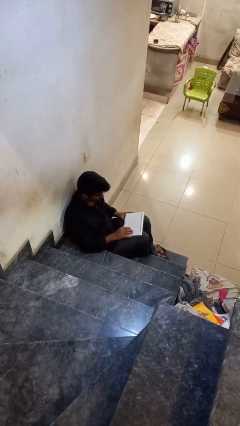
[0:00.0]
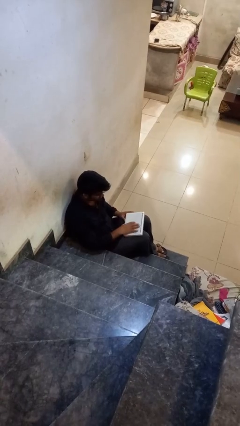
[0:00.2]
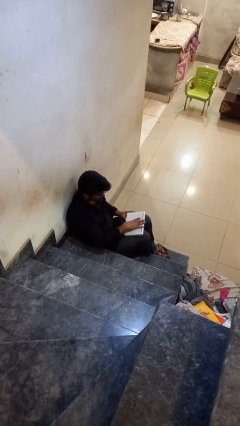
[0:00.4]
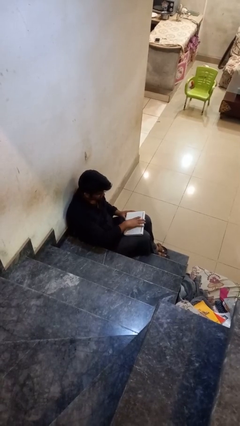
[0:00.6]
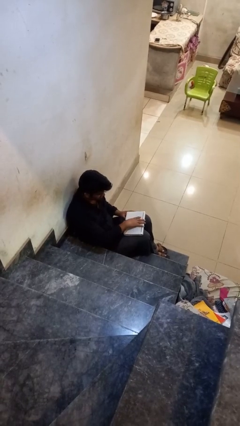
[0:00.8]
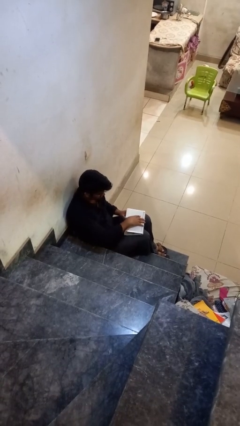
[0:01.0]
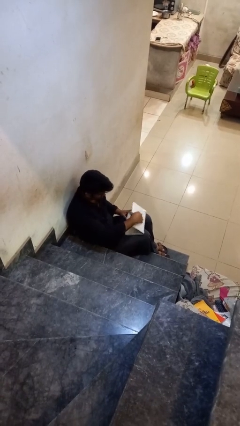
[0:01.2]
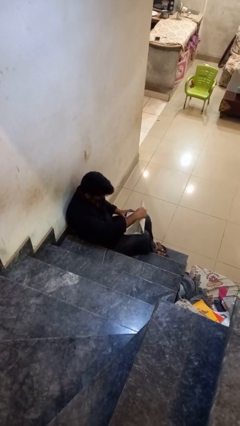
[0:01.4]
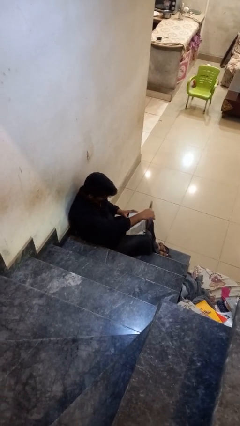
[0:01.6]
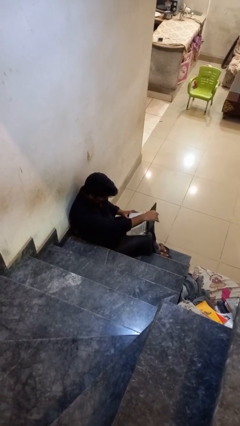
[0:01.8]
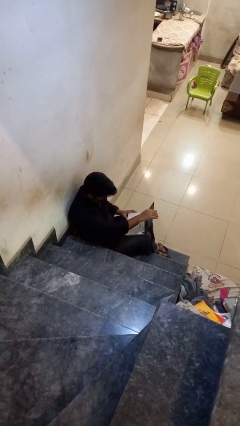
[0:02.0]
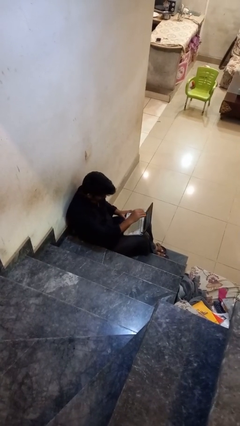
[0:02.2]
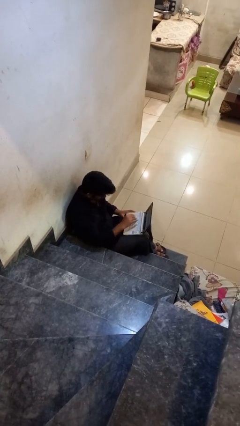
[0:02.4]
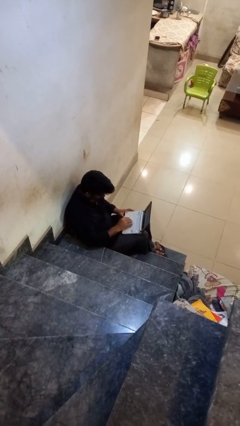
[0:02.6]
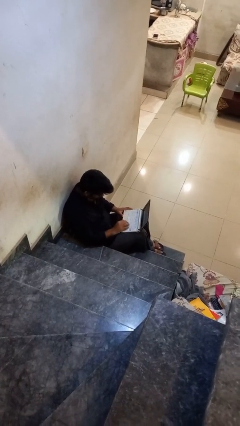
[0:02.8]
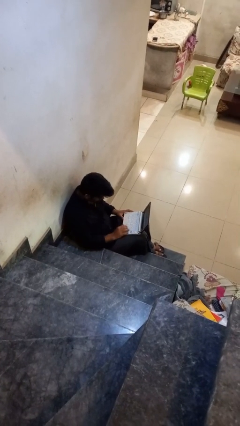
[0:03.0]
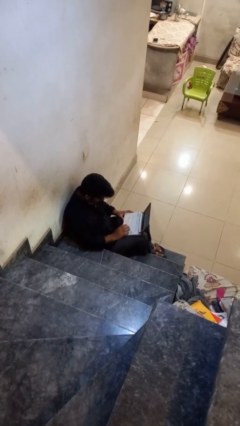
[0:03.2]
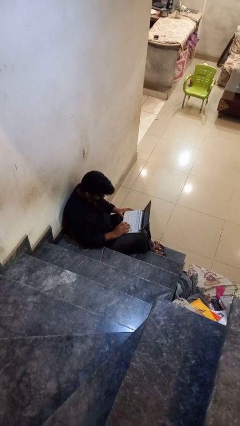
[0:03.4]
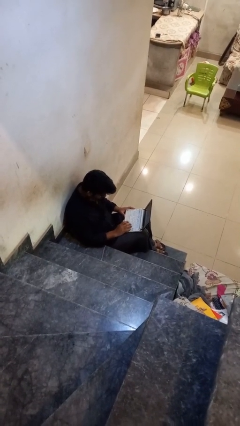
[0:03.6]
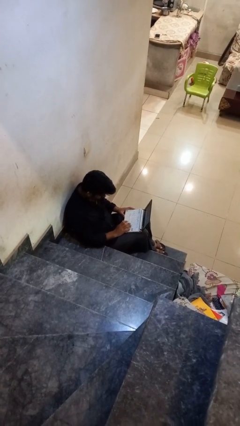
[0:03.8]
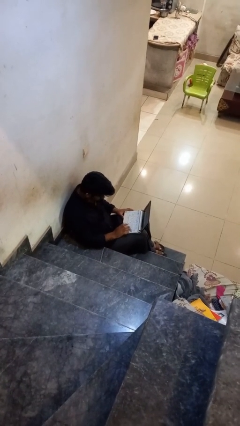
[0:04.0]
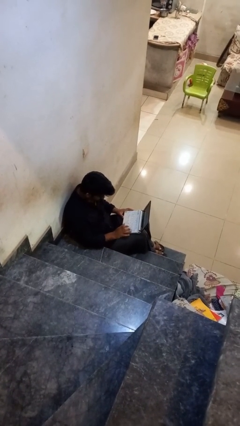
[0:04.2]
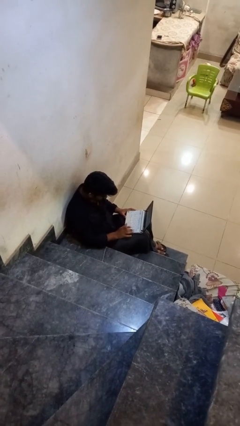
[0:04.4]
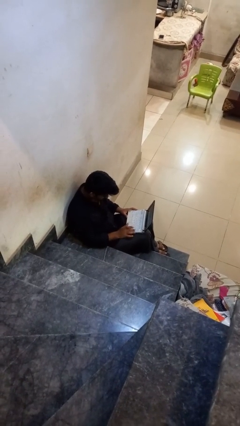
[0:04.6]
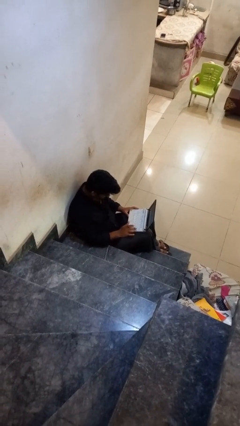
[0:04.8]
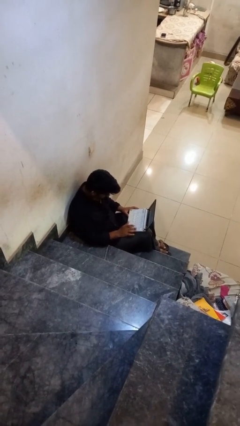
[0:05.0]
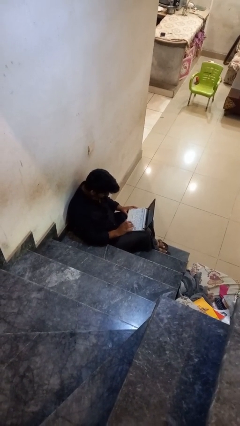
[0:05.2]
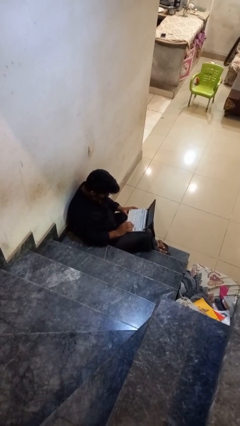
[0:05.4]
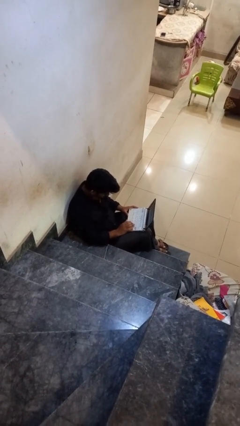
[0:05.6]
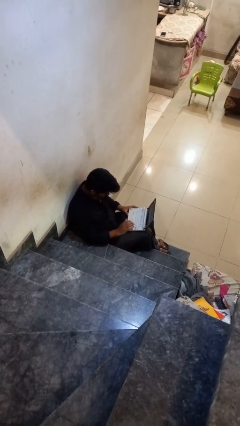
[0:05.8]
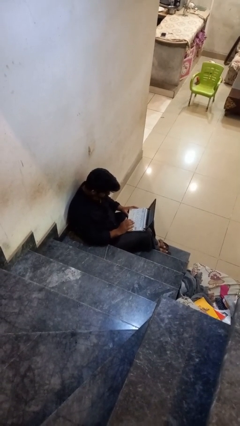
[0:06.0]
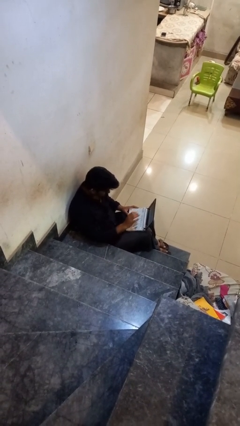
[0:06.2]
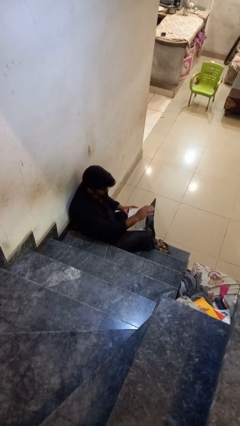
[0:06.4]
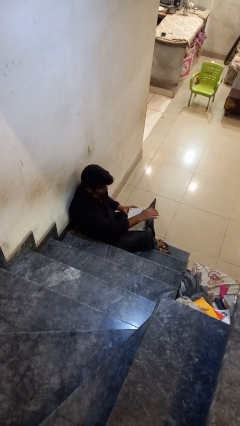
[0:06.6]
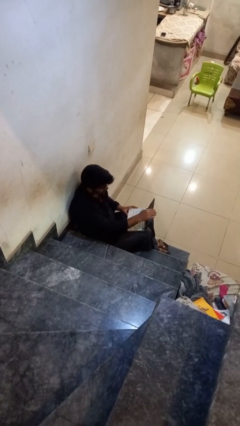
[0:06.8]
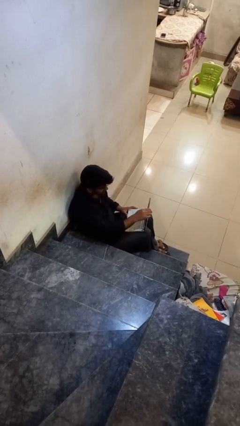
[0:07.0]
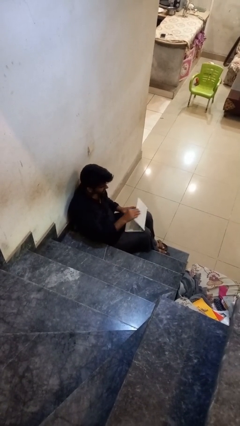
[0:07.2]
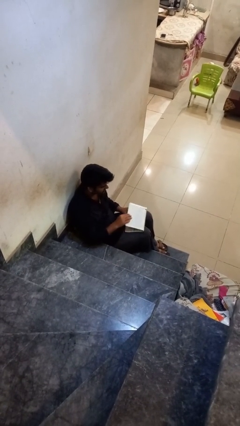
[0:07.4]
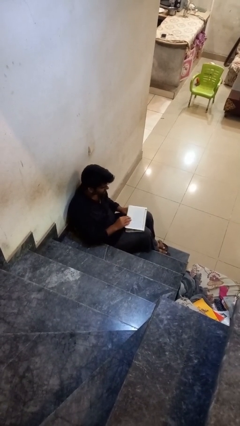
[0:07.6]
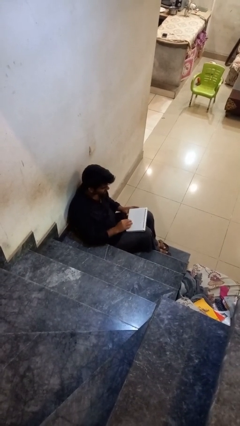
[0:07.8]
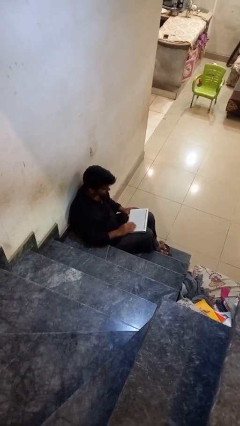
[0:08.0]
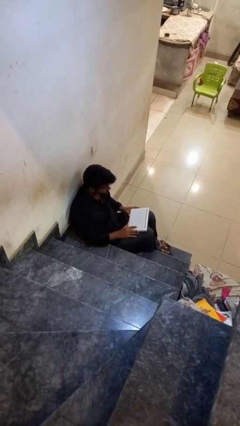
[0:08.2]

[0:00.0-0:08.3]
person interacts with laptop

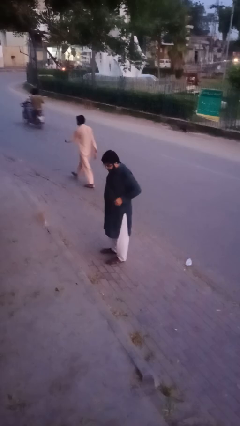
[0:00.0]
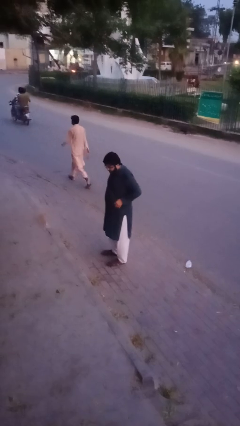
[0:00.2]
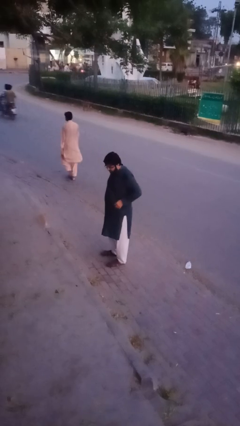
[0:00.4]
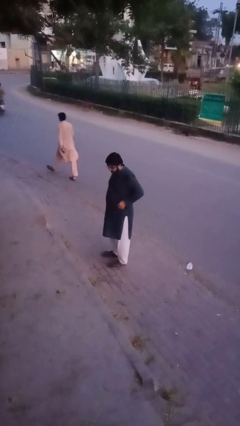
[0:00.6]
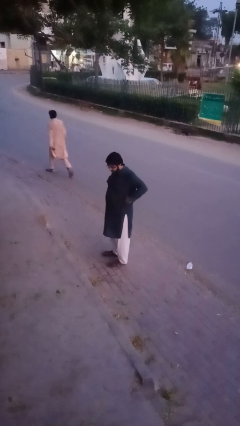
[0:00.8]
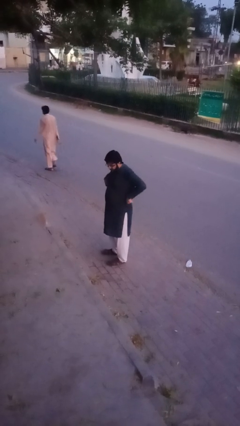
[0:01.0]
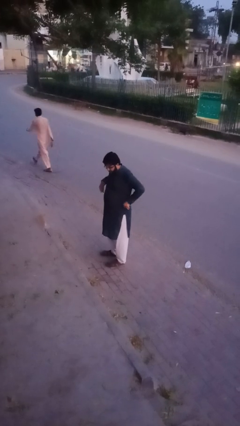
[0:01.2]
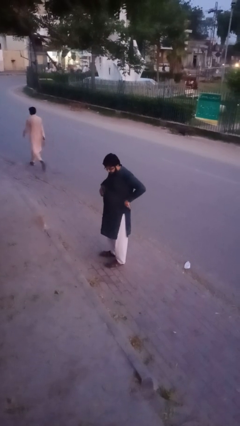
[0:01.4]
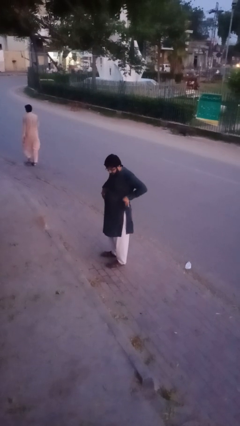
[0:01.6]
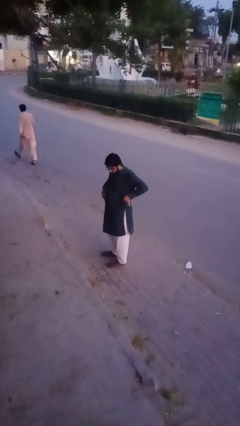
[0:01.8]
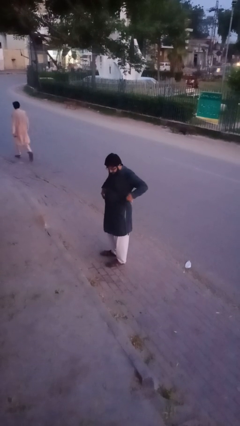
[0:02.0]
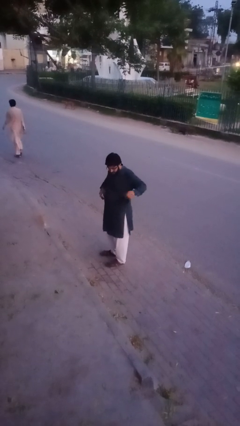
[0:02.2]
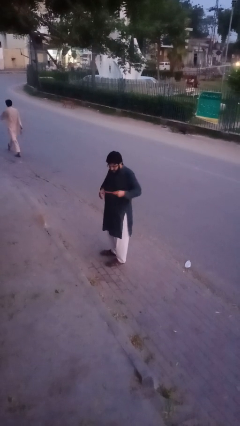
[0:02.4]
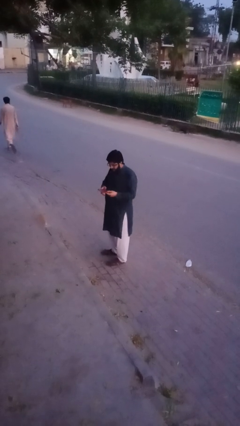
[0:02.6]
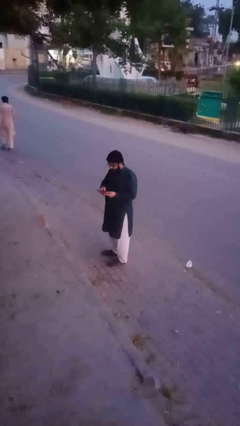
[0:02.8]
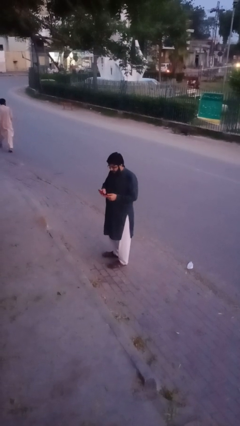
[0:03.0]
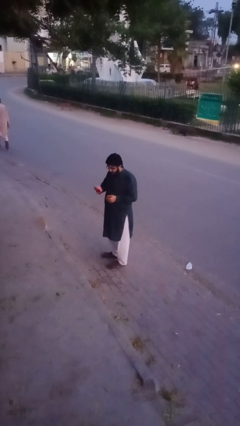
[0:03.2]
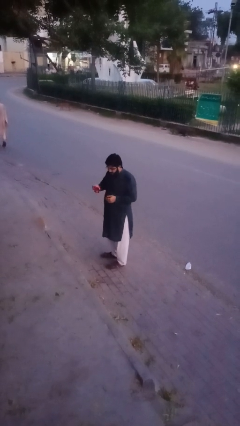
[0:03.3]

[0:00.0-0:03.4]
person takes phone from pocket

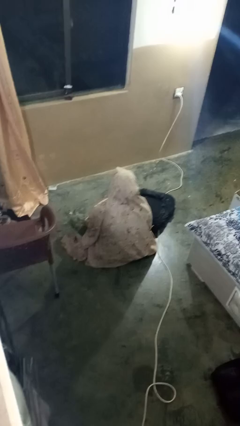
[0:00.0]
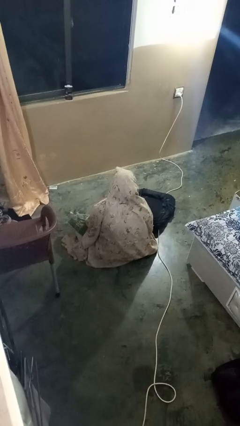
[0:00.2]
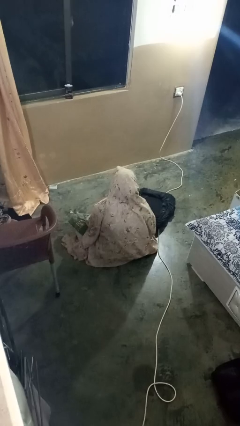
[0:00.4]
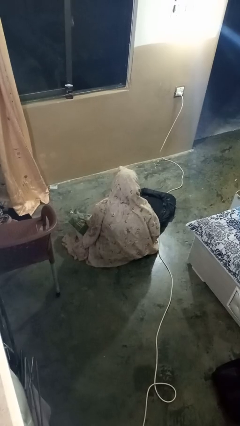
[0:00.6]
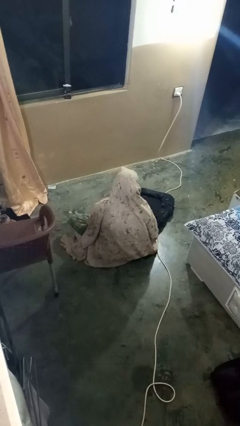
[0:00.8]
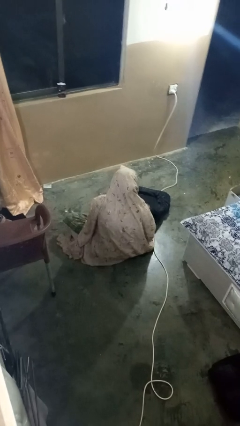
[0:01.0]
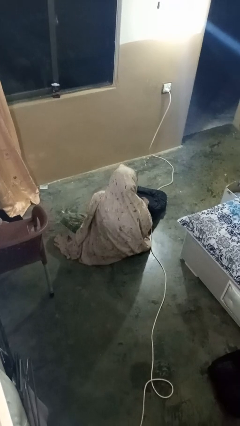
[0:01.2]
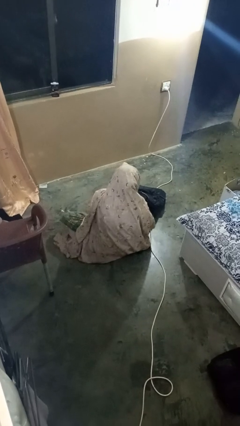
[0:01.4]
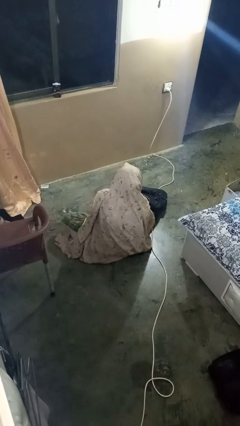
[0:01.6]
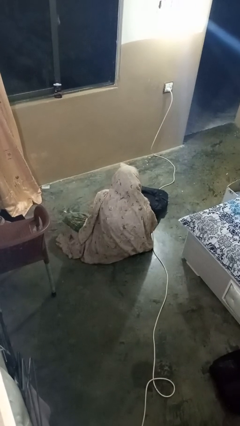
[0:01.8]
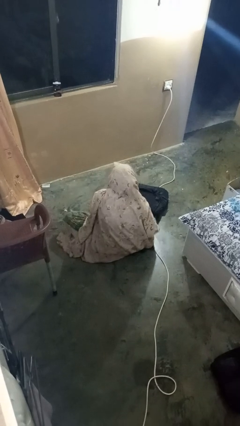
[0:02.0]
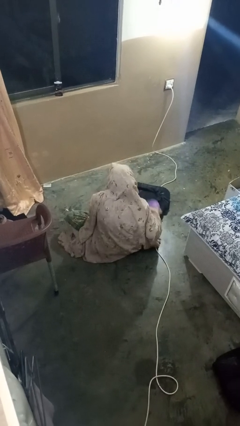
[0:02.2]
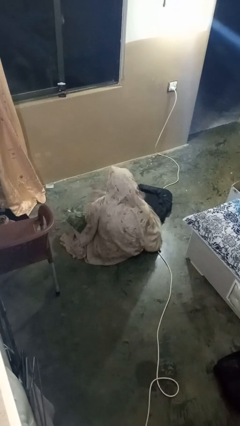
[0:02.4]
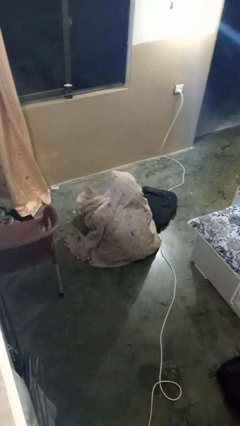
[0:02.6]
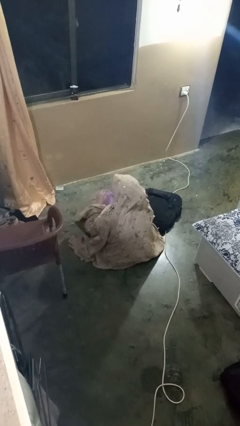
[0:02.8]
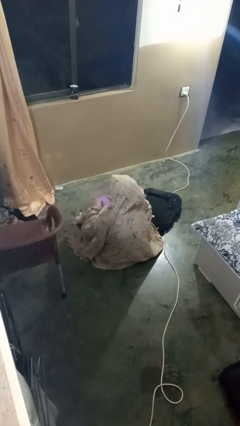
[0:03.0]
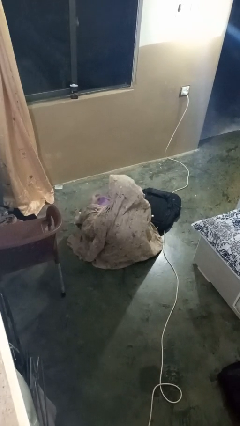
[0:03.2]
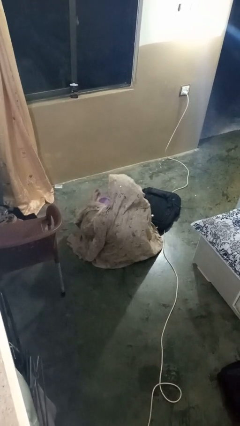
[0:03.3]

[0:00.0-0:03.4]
person eats snack from bag

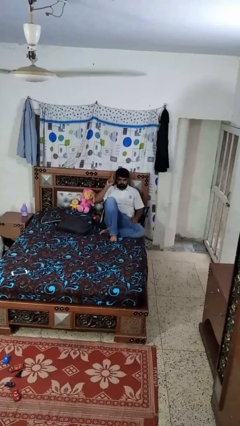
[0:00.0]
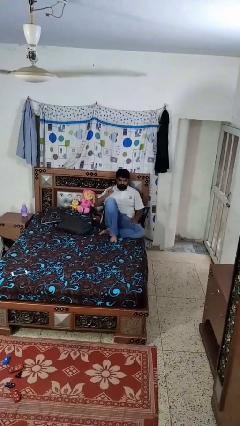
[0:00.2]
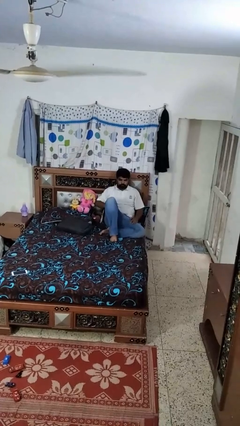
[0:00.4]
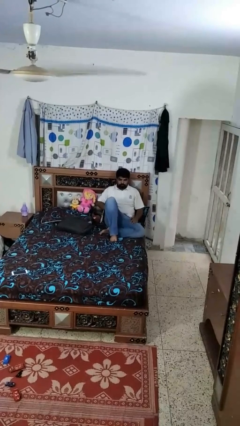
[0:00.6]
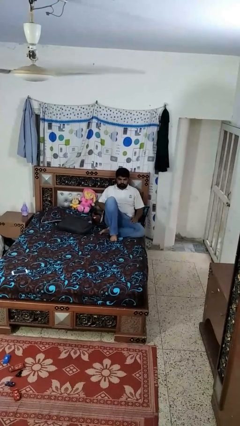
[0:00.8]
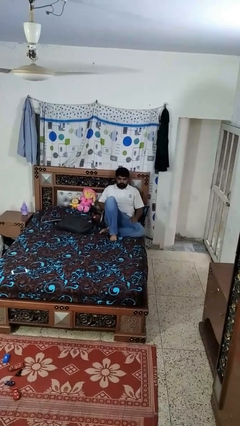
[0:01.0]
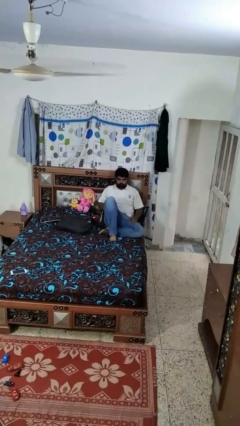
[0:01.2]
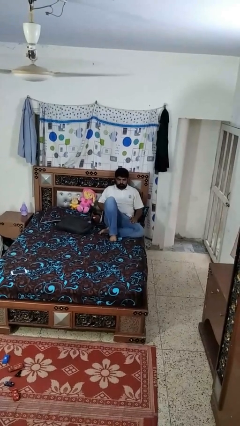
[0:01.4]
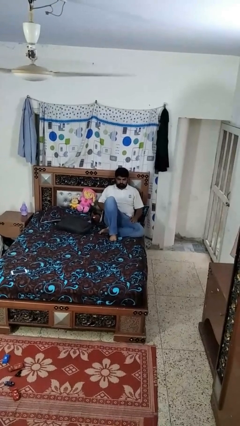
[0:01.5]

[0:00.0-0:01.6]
person gestures lower hand

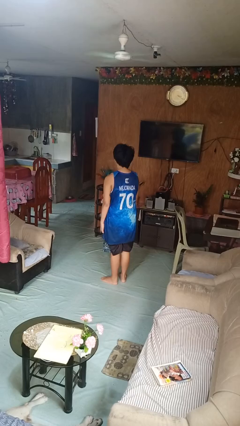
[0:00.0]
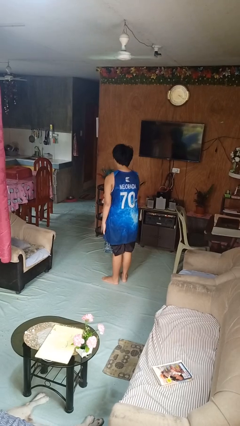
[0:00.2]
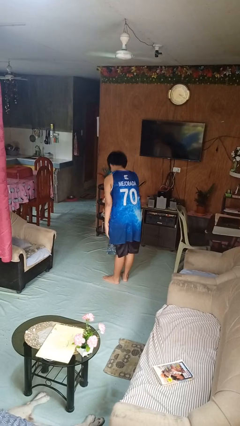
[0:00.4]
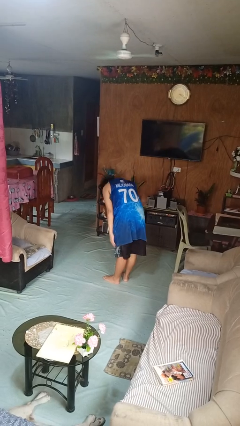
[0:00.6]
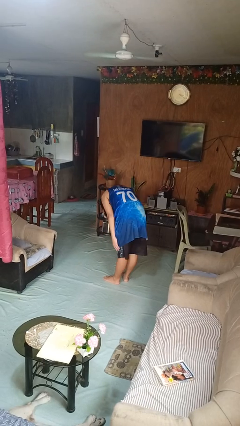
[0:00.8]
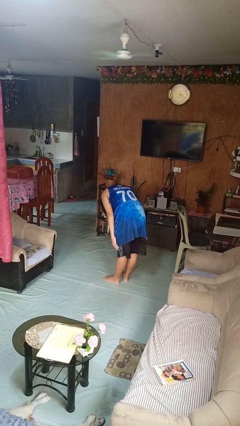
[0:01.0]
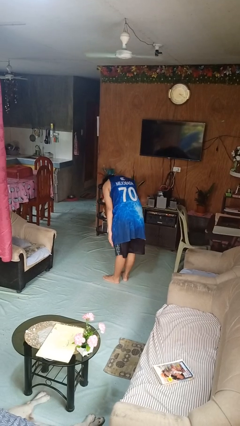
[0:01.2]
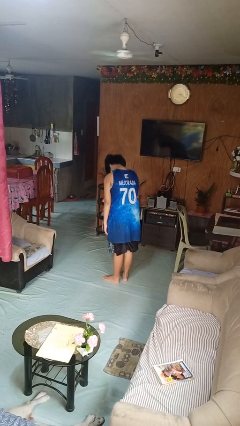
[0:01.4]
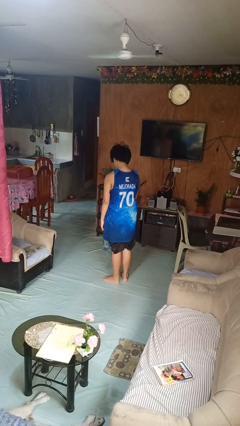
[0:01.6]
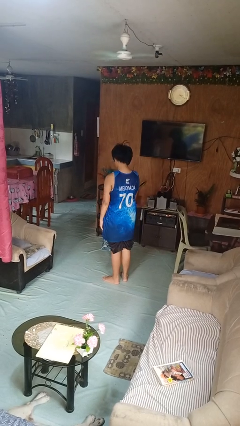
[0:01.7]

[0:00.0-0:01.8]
person bows
